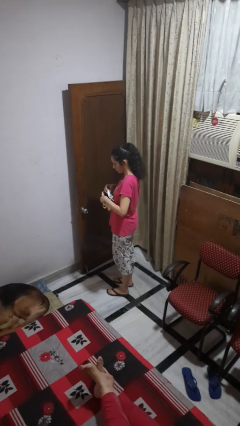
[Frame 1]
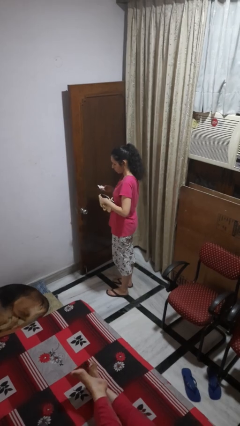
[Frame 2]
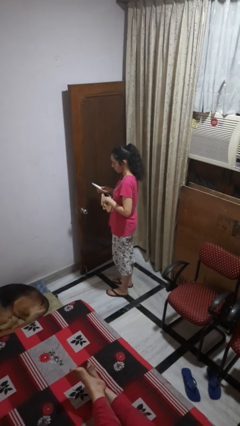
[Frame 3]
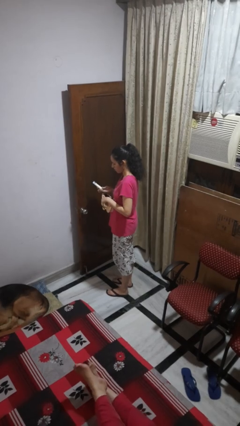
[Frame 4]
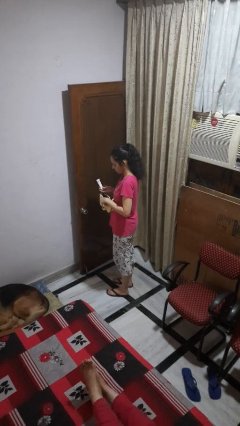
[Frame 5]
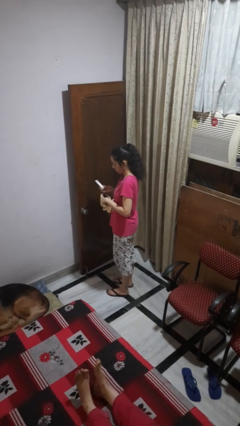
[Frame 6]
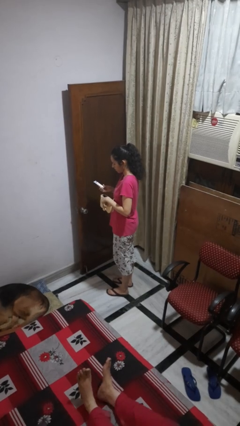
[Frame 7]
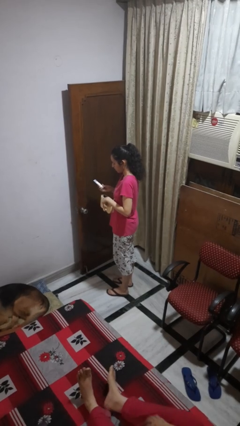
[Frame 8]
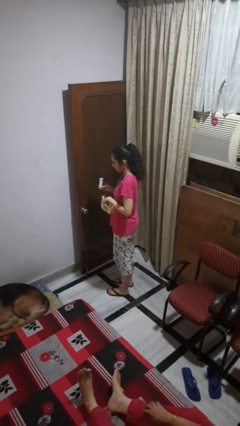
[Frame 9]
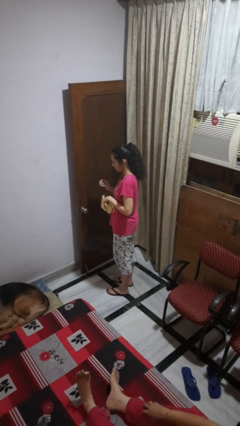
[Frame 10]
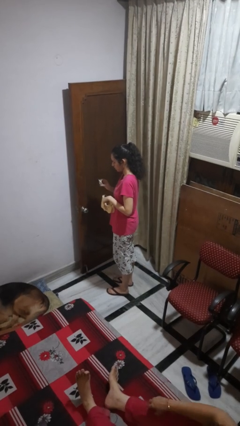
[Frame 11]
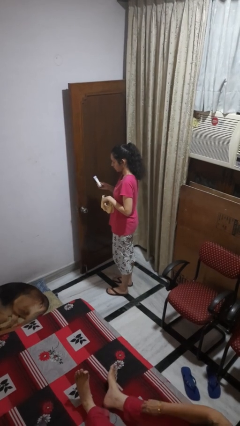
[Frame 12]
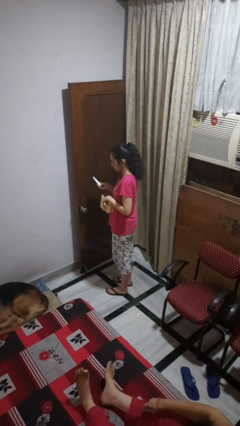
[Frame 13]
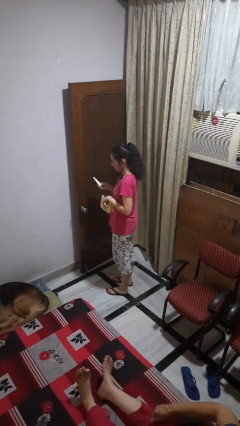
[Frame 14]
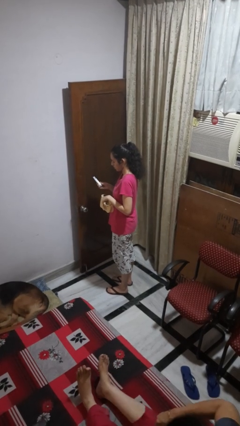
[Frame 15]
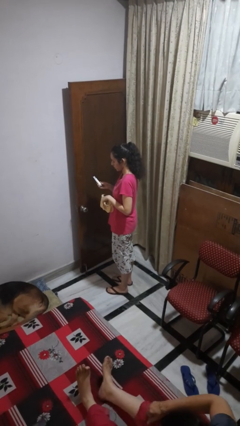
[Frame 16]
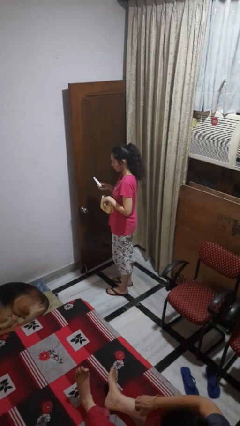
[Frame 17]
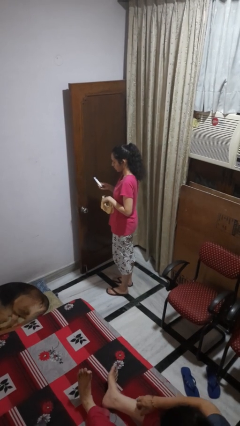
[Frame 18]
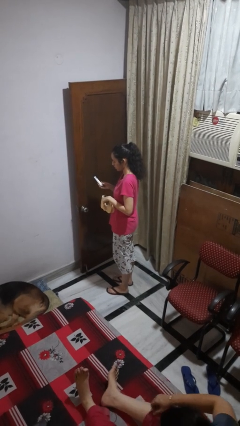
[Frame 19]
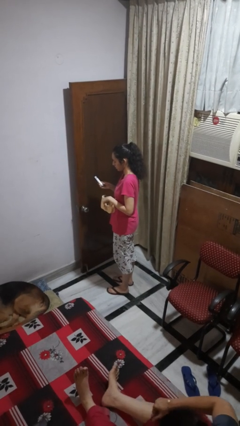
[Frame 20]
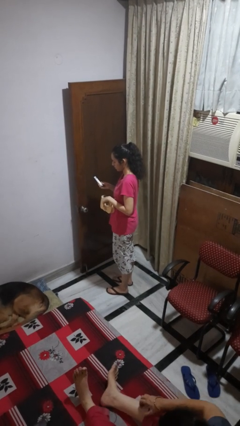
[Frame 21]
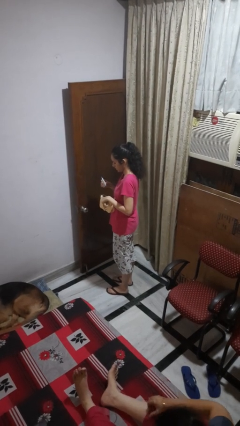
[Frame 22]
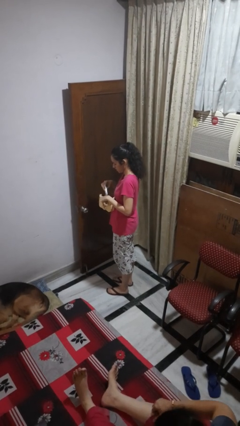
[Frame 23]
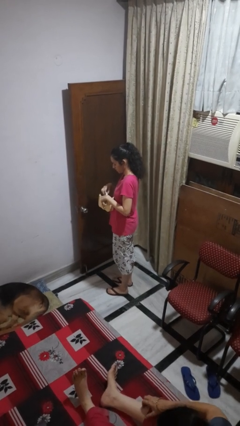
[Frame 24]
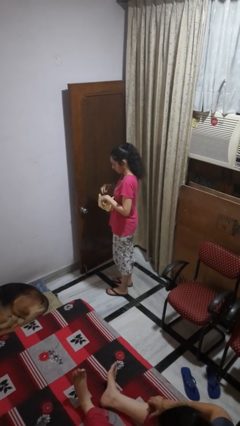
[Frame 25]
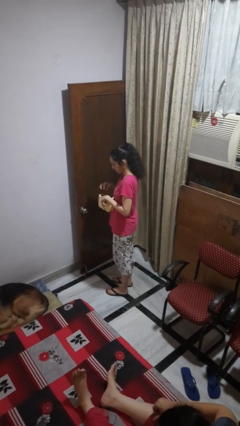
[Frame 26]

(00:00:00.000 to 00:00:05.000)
person takes object from purse

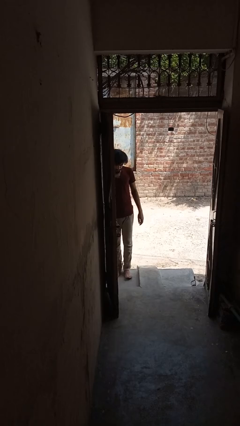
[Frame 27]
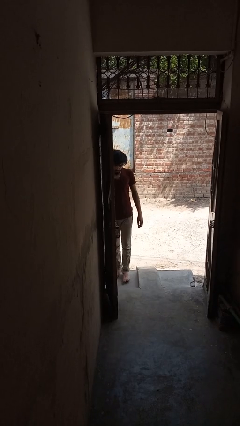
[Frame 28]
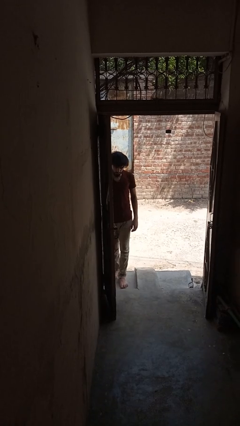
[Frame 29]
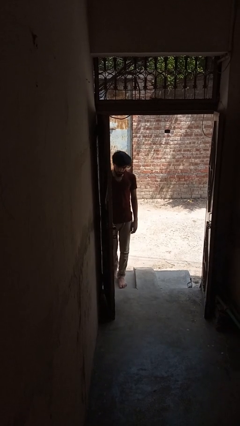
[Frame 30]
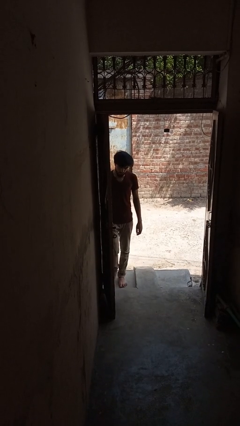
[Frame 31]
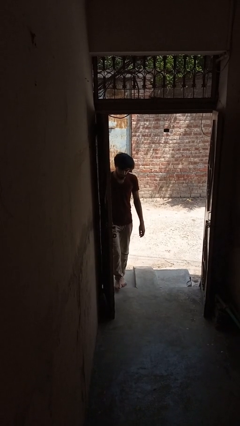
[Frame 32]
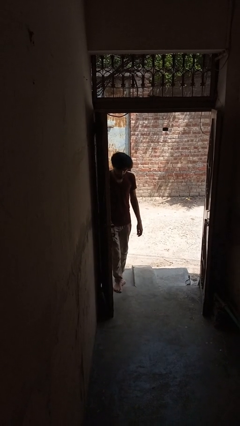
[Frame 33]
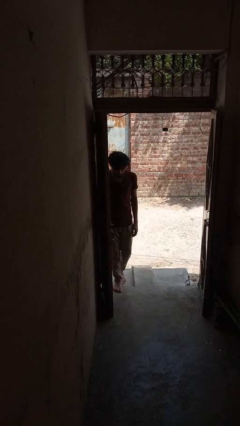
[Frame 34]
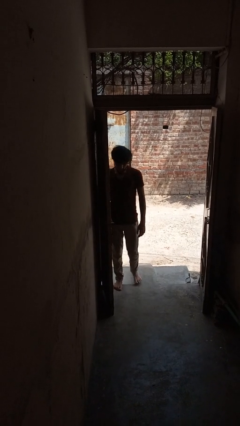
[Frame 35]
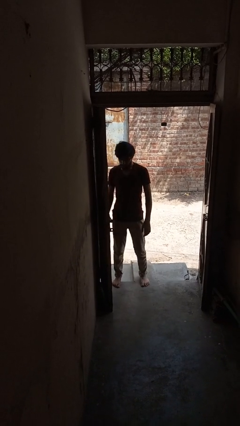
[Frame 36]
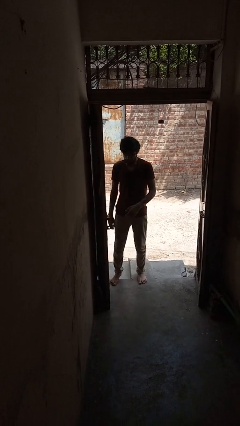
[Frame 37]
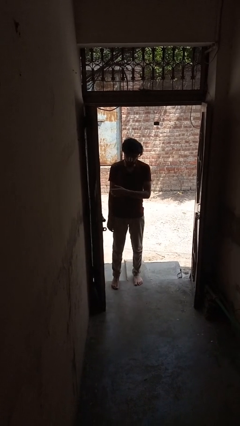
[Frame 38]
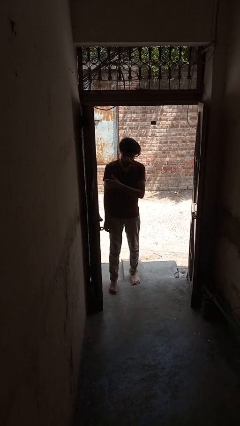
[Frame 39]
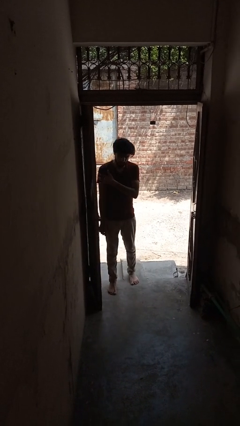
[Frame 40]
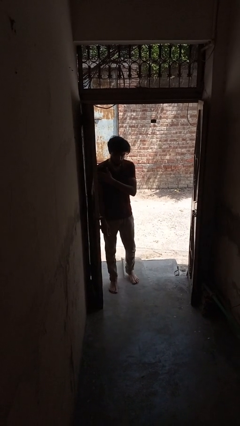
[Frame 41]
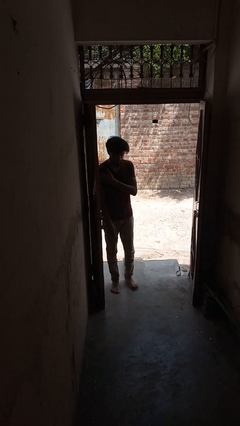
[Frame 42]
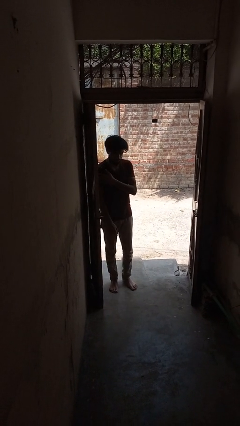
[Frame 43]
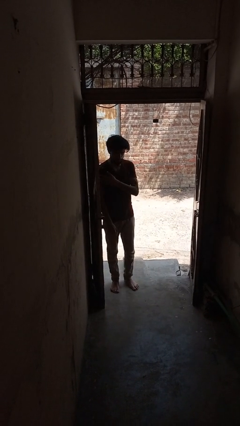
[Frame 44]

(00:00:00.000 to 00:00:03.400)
person bumps into wall

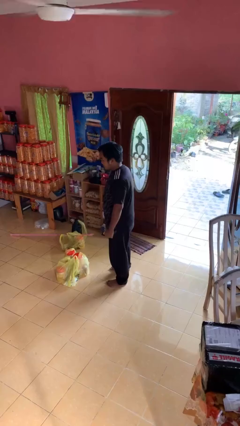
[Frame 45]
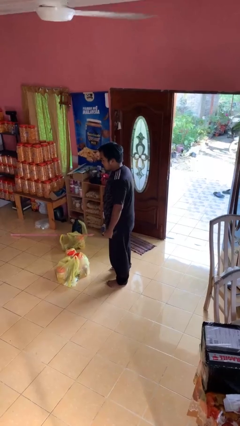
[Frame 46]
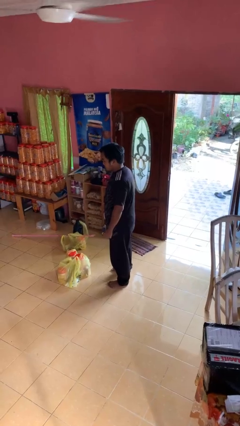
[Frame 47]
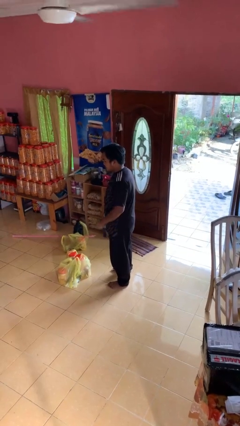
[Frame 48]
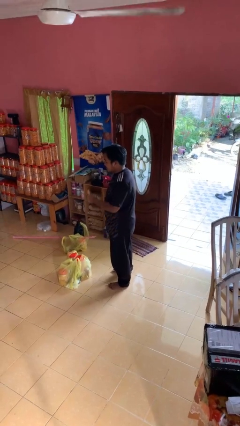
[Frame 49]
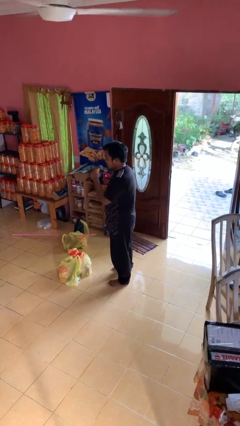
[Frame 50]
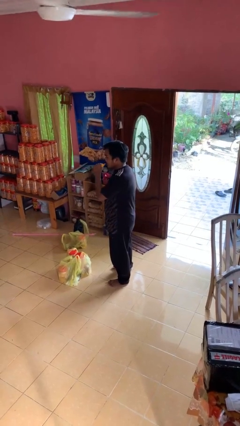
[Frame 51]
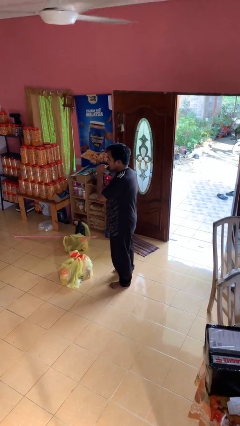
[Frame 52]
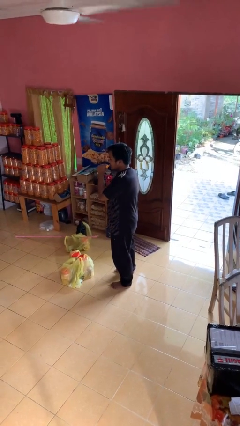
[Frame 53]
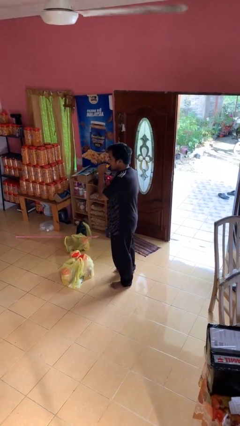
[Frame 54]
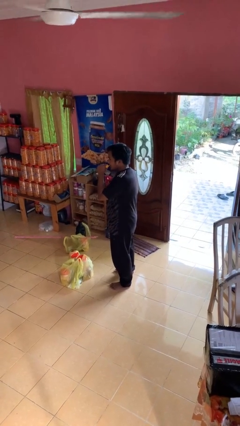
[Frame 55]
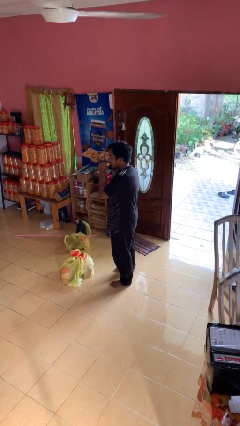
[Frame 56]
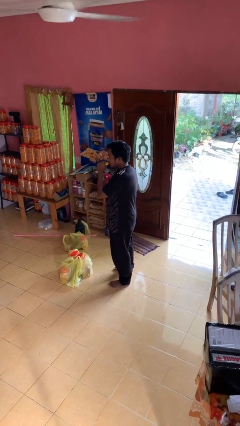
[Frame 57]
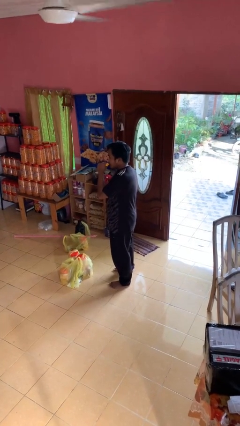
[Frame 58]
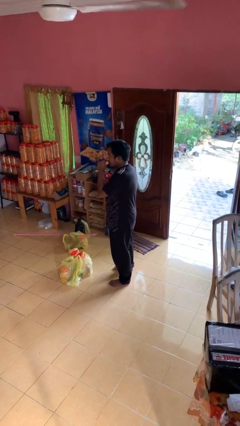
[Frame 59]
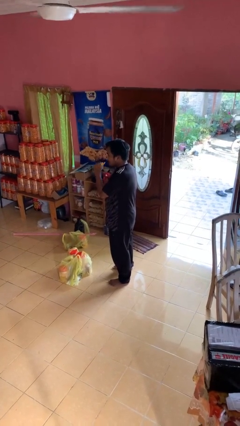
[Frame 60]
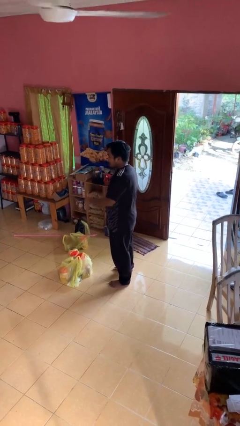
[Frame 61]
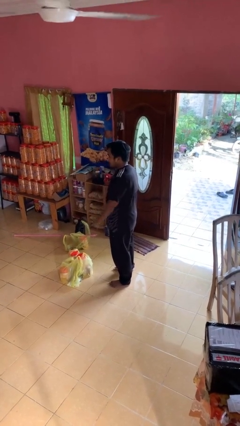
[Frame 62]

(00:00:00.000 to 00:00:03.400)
person eats banana

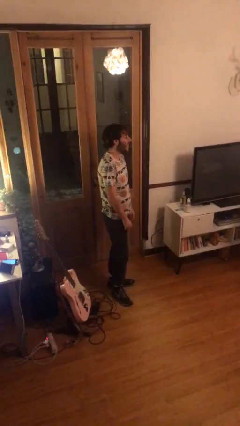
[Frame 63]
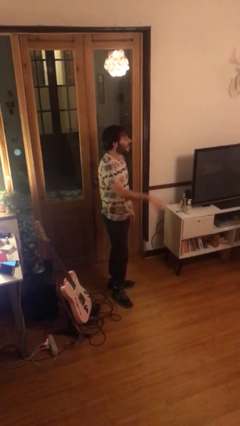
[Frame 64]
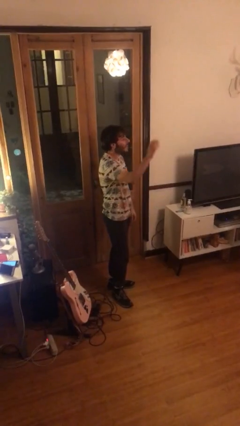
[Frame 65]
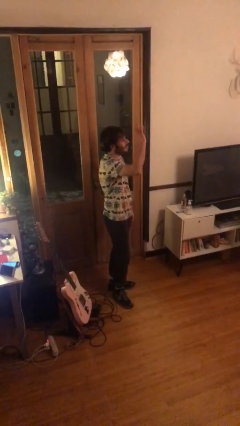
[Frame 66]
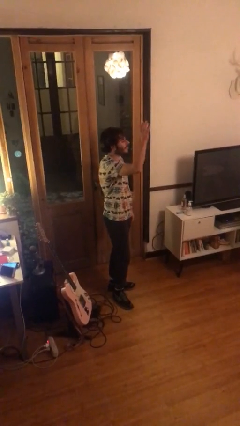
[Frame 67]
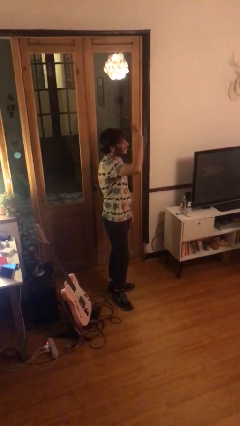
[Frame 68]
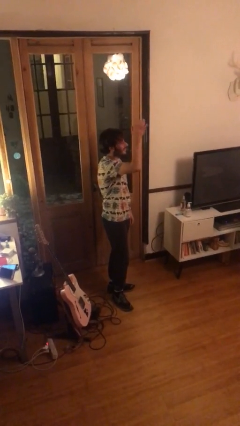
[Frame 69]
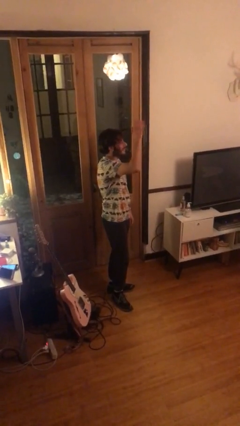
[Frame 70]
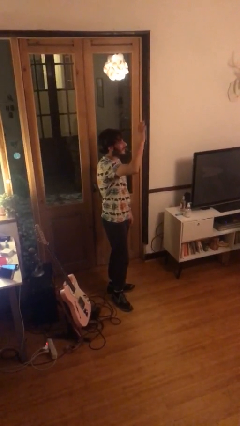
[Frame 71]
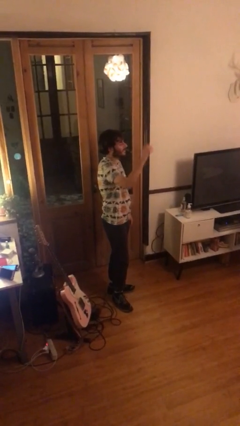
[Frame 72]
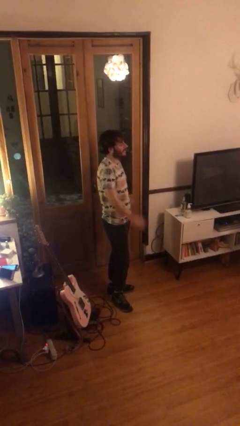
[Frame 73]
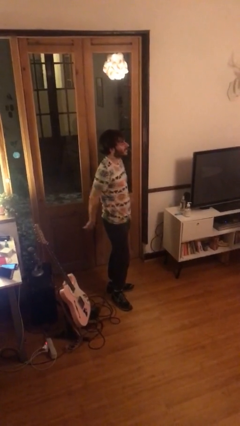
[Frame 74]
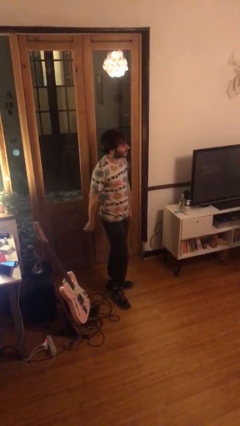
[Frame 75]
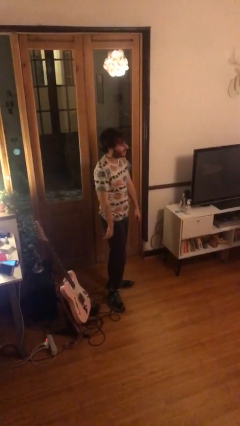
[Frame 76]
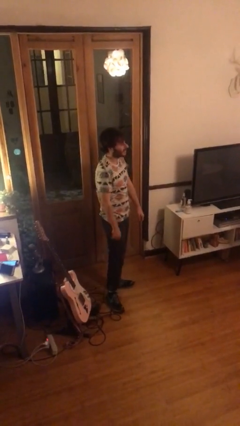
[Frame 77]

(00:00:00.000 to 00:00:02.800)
person waves at person

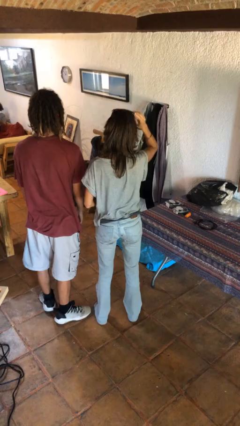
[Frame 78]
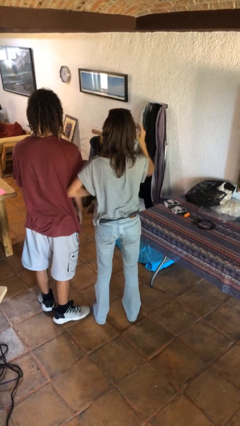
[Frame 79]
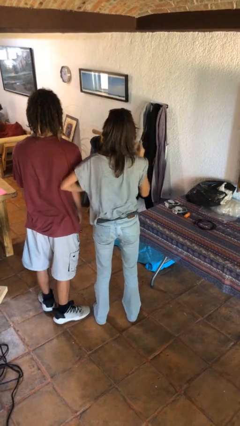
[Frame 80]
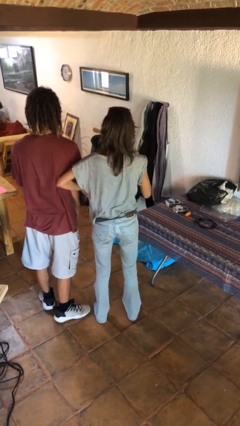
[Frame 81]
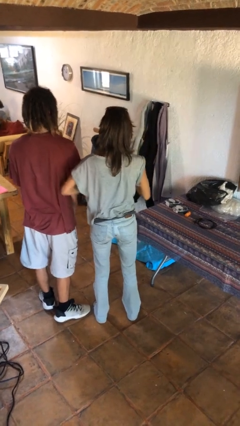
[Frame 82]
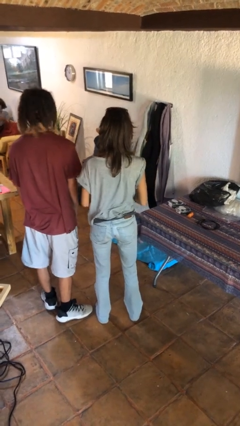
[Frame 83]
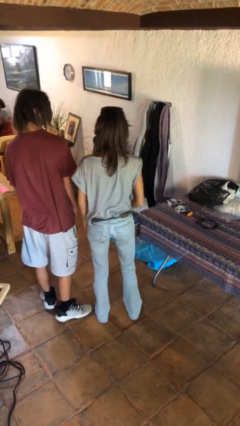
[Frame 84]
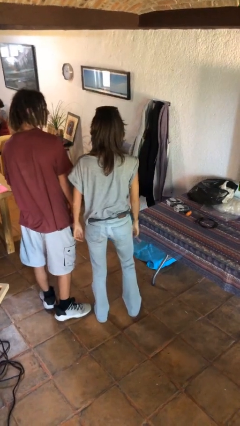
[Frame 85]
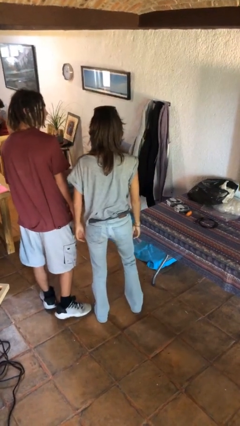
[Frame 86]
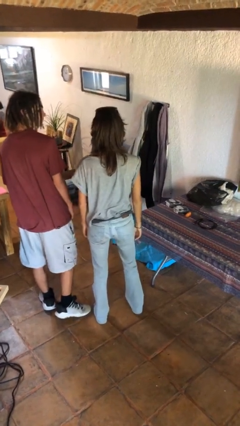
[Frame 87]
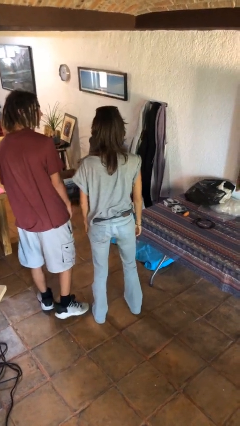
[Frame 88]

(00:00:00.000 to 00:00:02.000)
person nudges person with elbow

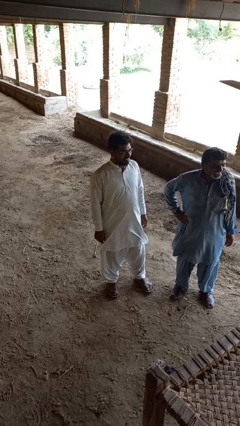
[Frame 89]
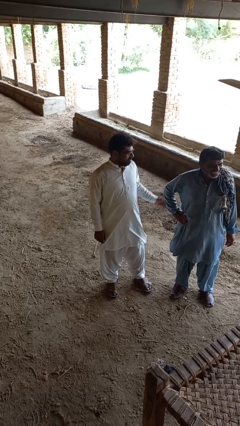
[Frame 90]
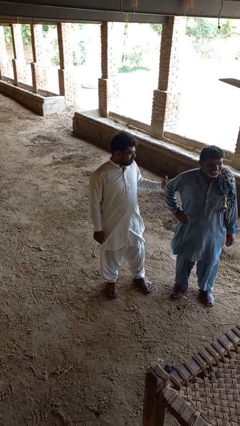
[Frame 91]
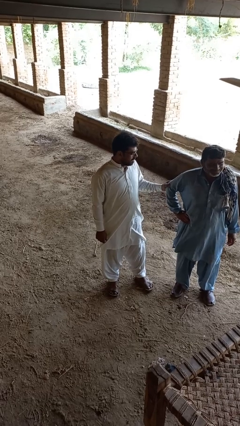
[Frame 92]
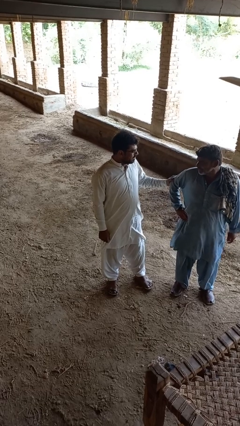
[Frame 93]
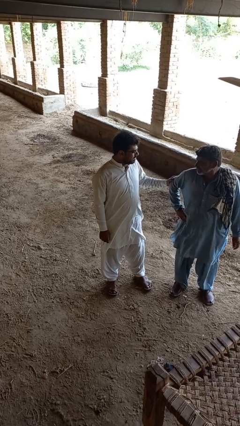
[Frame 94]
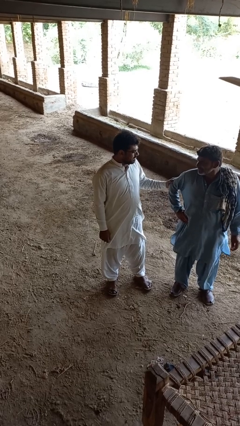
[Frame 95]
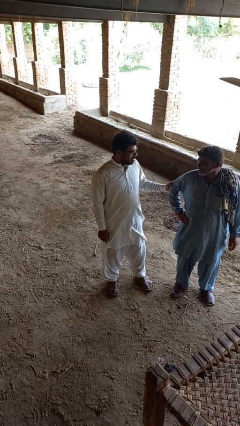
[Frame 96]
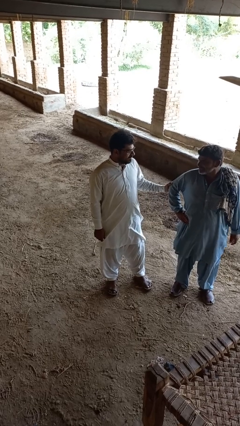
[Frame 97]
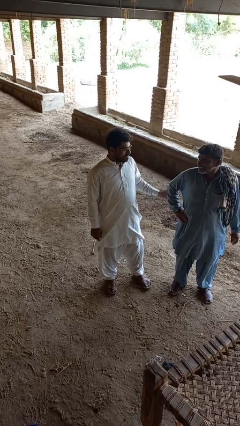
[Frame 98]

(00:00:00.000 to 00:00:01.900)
person grabs person by forearm
